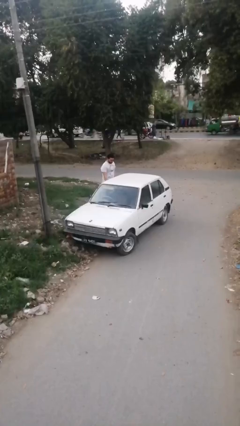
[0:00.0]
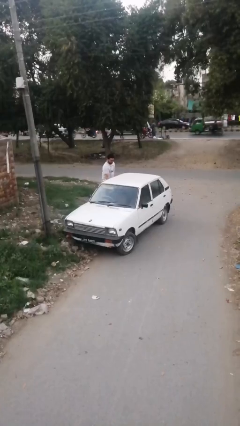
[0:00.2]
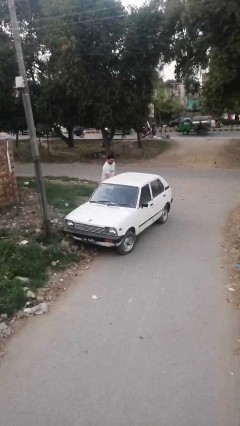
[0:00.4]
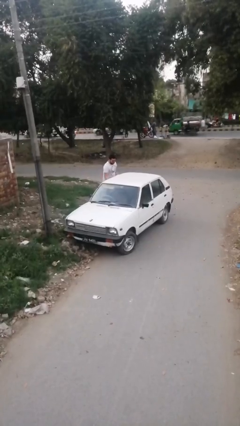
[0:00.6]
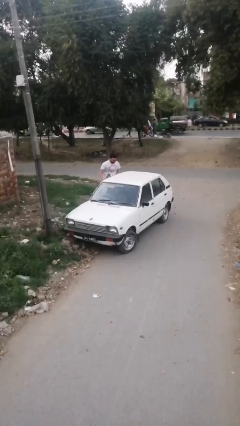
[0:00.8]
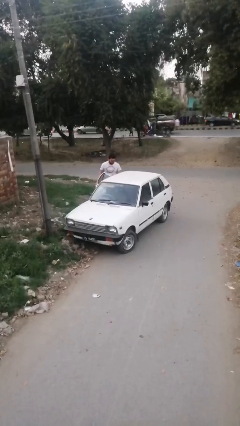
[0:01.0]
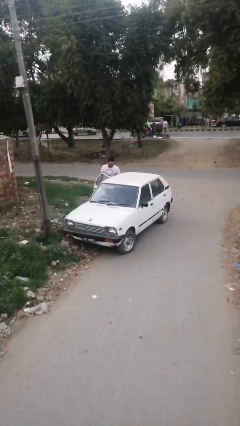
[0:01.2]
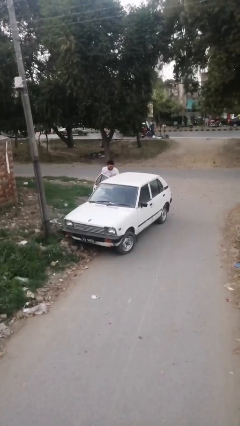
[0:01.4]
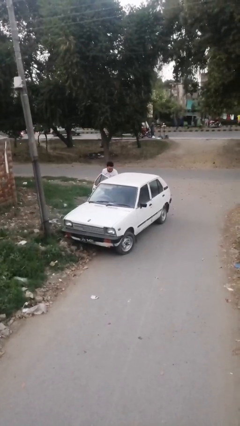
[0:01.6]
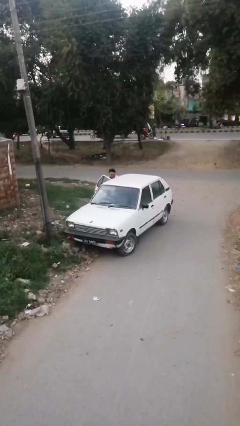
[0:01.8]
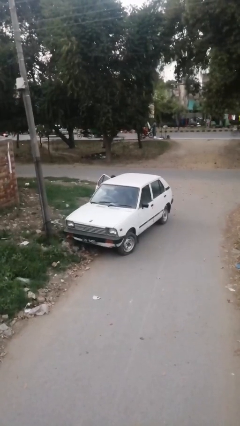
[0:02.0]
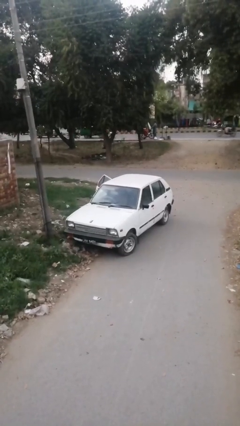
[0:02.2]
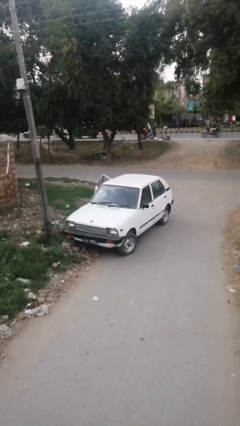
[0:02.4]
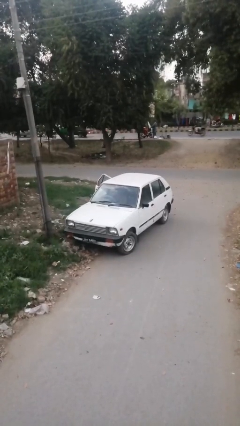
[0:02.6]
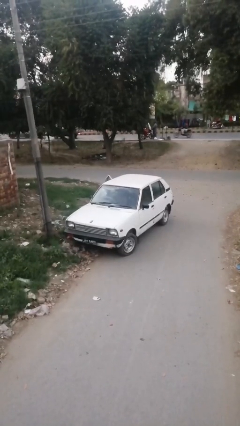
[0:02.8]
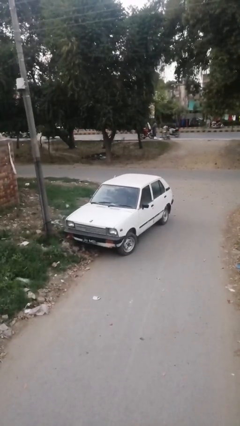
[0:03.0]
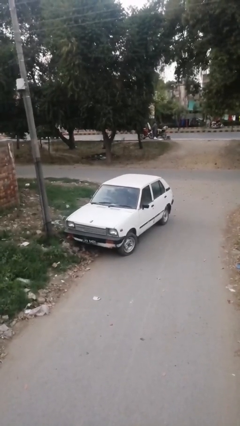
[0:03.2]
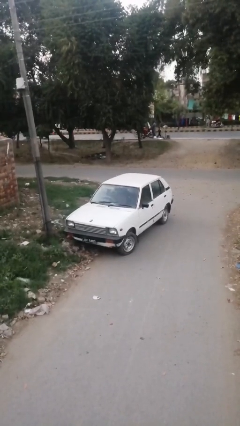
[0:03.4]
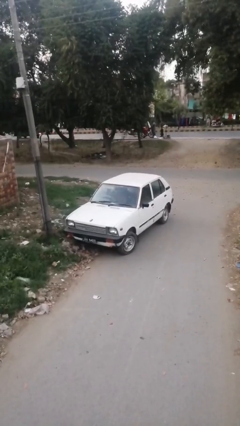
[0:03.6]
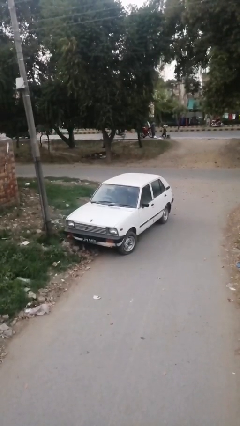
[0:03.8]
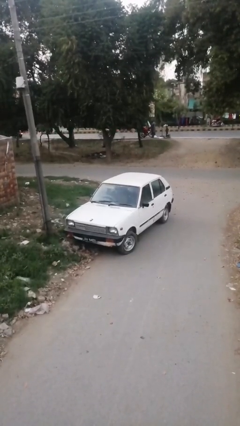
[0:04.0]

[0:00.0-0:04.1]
car picks up person

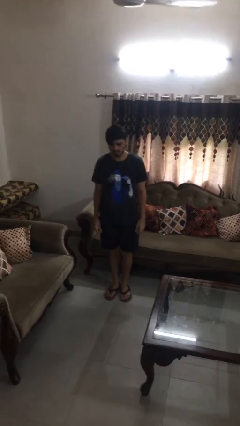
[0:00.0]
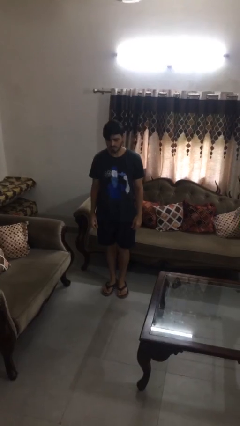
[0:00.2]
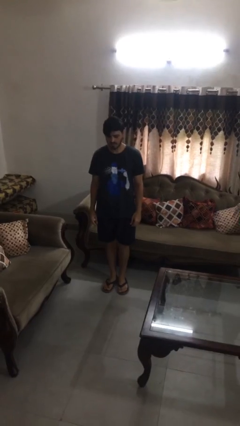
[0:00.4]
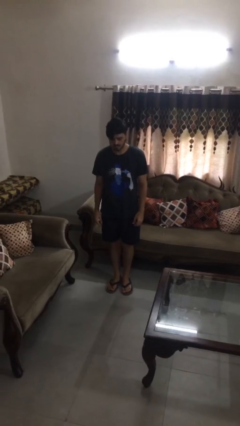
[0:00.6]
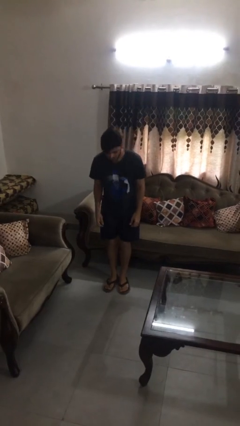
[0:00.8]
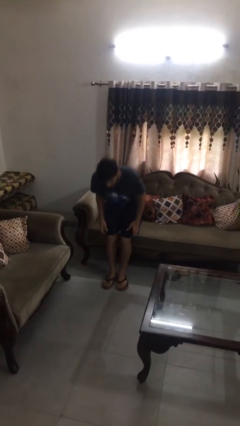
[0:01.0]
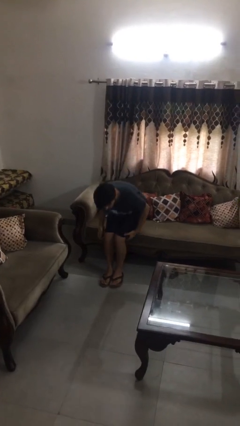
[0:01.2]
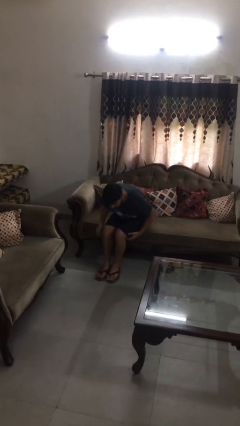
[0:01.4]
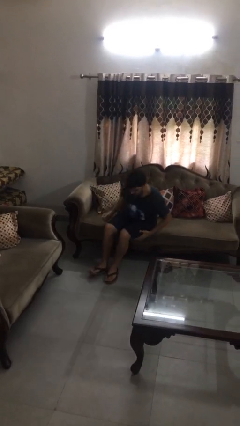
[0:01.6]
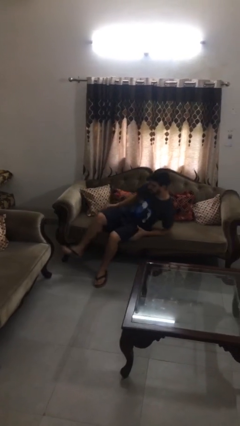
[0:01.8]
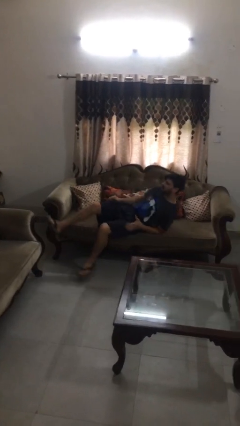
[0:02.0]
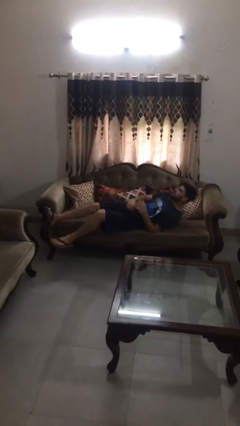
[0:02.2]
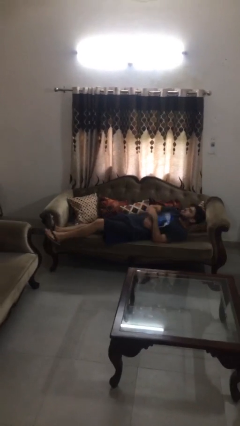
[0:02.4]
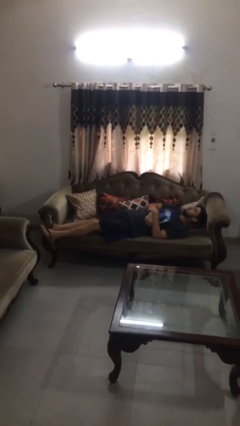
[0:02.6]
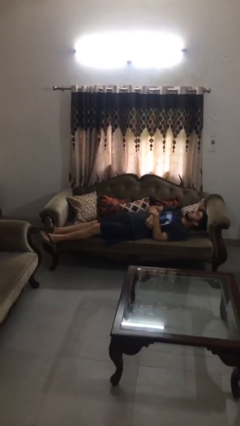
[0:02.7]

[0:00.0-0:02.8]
person lies down on couch

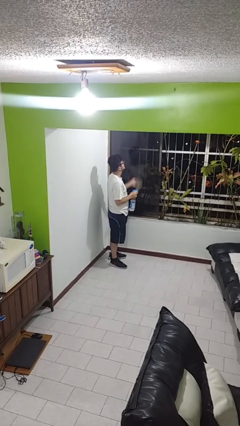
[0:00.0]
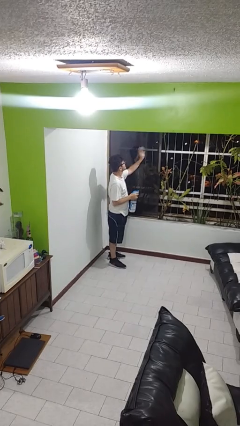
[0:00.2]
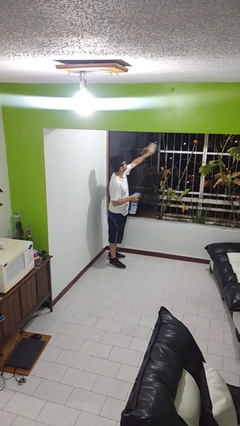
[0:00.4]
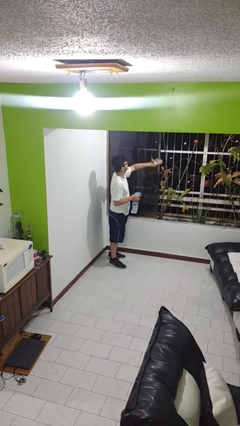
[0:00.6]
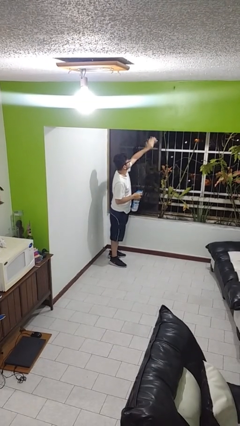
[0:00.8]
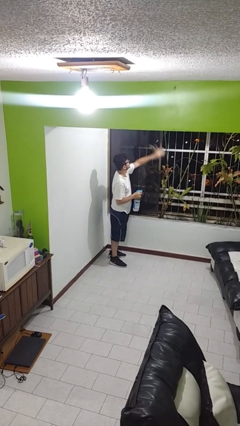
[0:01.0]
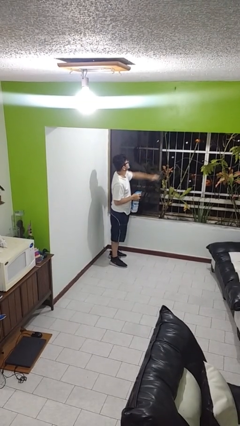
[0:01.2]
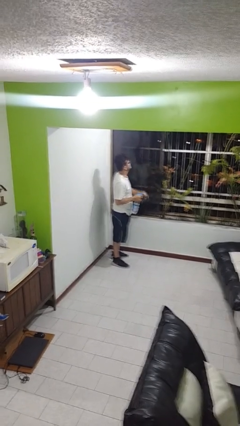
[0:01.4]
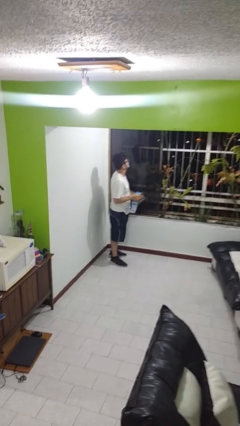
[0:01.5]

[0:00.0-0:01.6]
person washes window

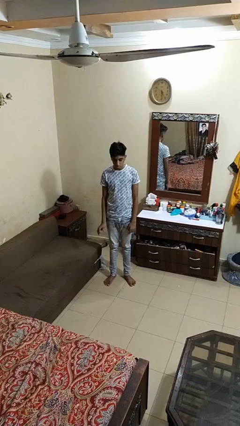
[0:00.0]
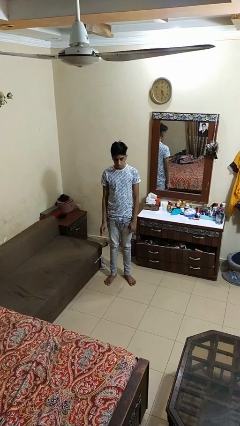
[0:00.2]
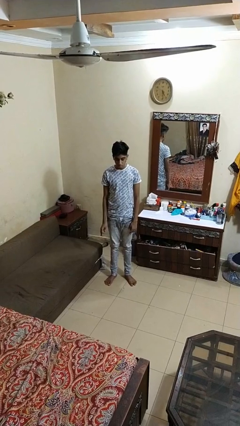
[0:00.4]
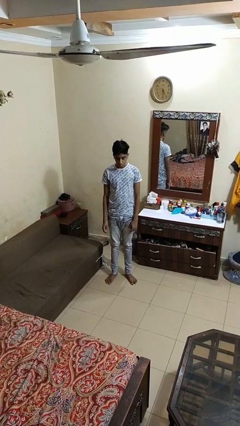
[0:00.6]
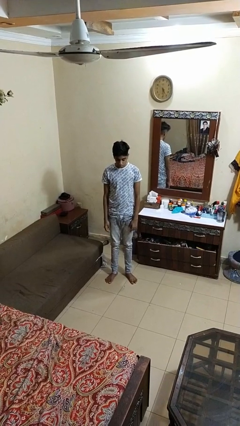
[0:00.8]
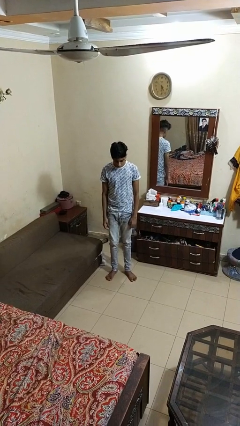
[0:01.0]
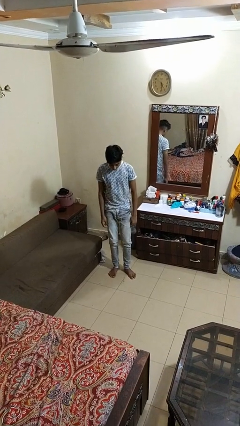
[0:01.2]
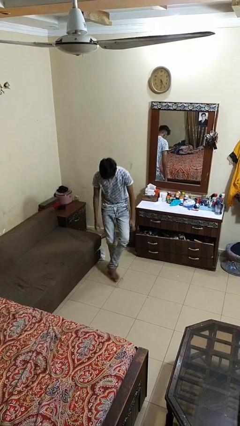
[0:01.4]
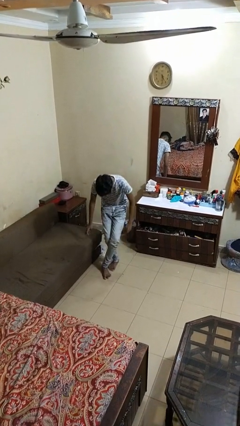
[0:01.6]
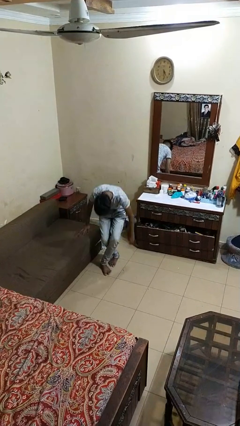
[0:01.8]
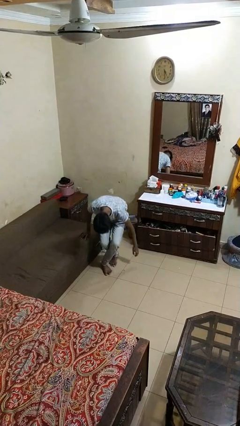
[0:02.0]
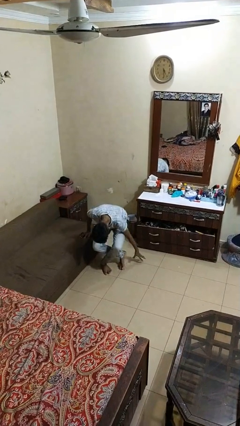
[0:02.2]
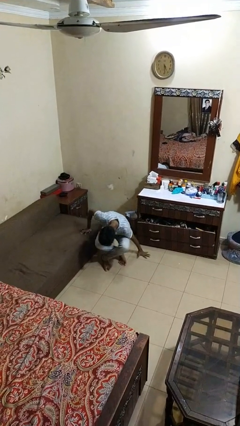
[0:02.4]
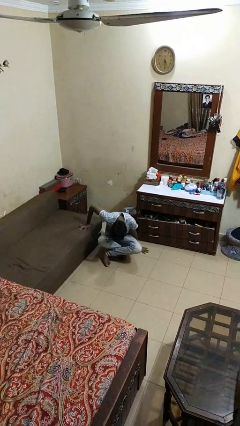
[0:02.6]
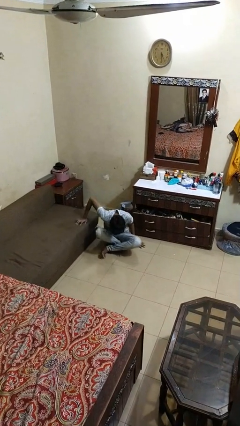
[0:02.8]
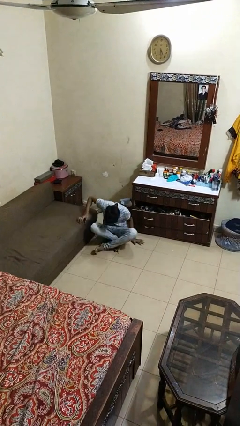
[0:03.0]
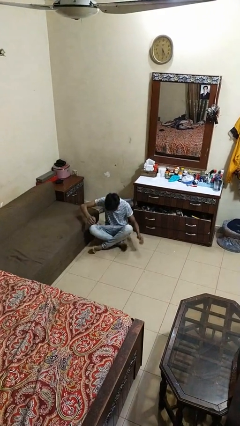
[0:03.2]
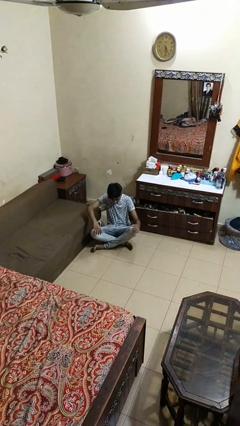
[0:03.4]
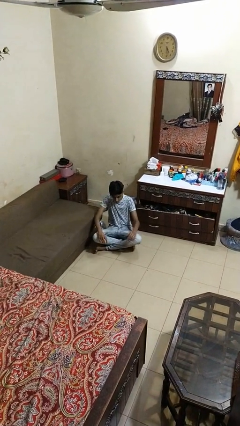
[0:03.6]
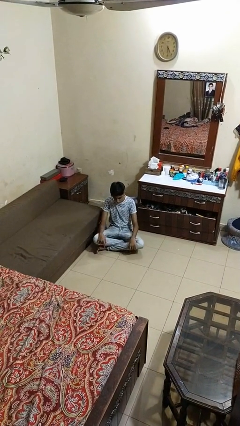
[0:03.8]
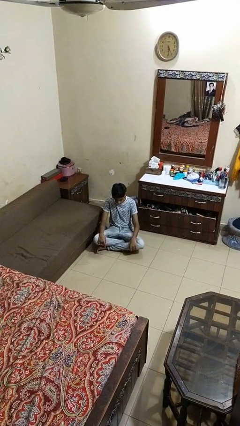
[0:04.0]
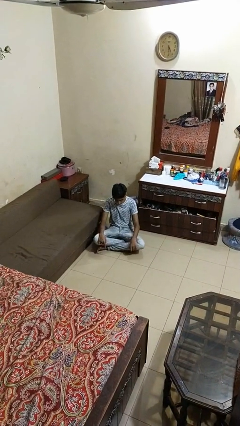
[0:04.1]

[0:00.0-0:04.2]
person sits crisscross

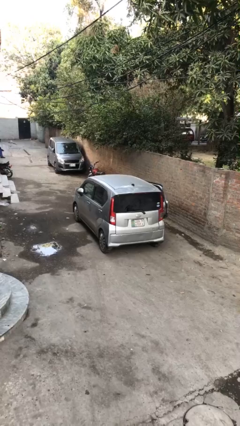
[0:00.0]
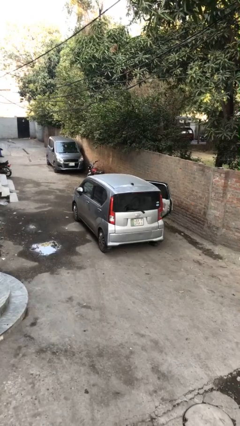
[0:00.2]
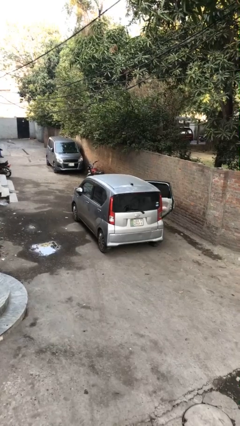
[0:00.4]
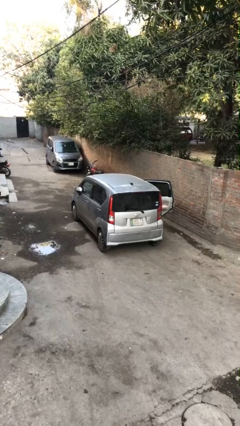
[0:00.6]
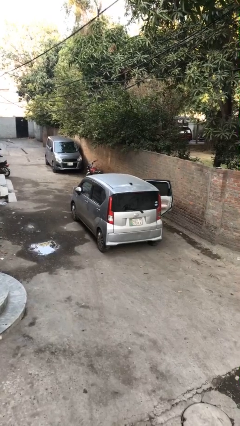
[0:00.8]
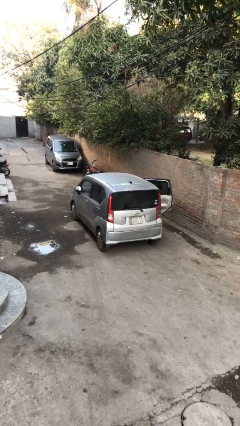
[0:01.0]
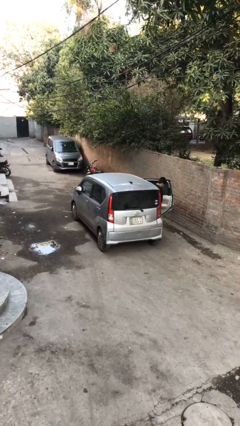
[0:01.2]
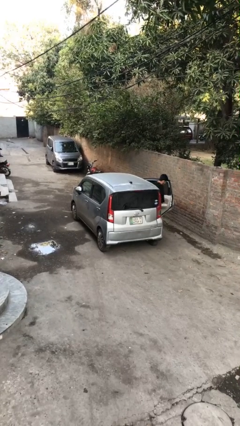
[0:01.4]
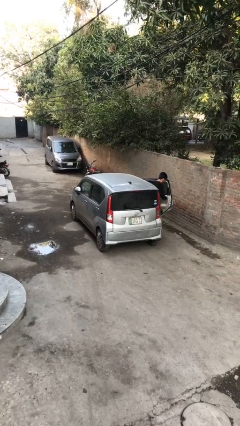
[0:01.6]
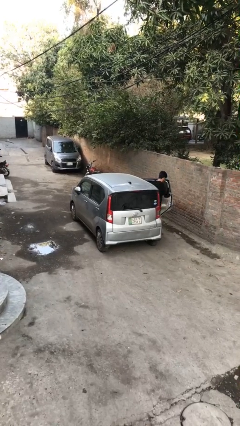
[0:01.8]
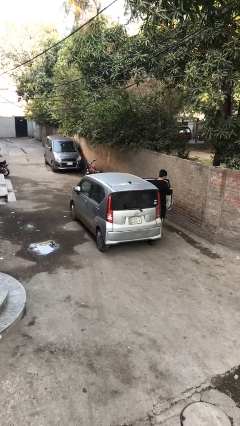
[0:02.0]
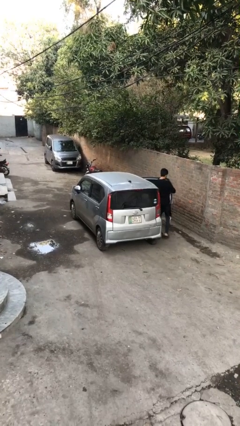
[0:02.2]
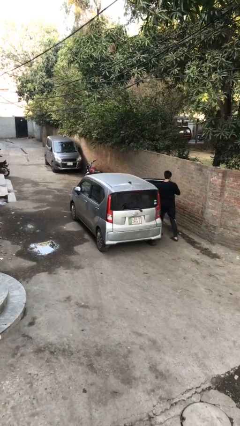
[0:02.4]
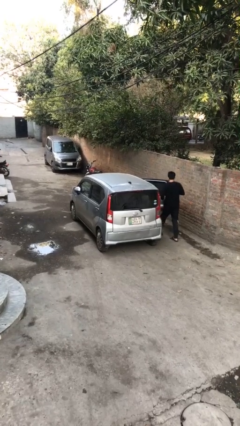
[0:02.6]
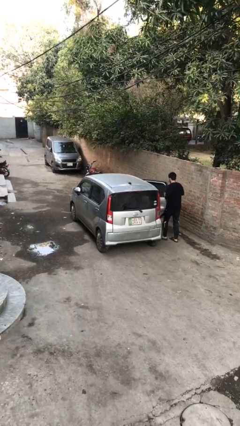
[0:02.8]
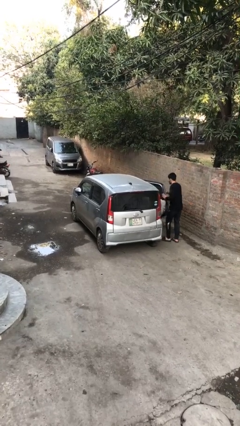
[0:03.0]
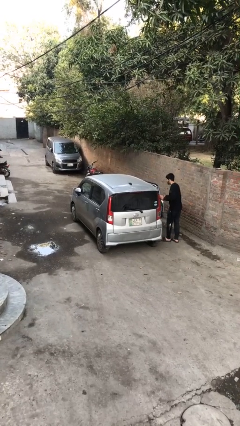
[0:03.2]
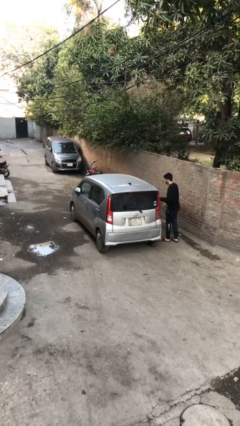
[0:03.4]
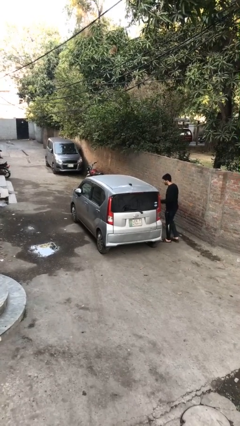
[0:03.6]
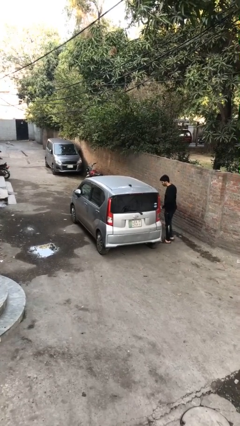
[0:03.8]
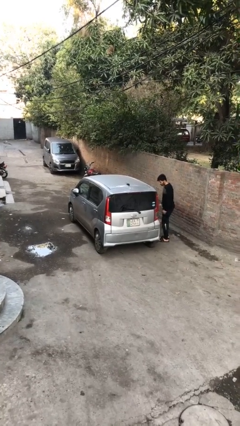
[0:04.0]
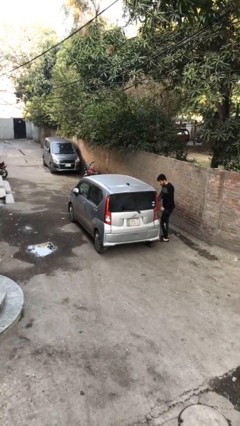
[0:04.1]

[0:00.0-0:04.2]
car drops off person

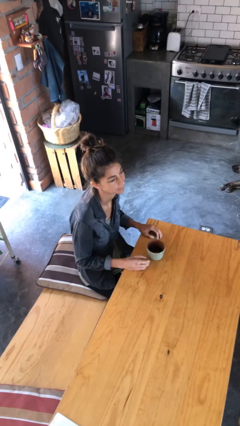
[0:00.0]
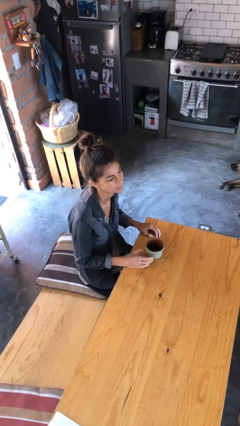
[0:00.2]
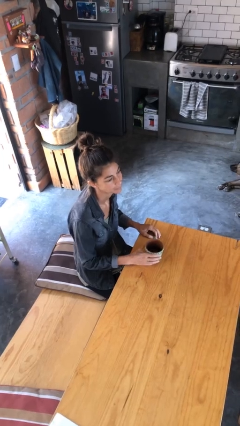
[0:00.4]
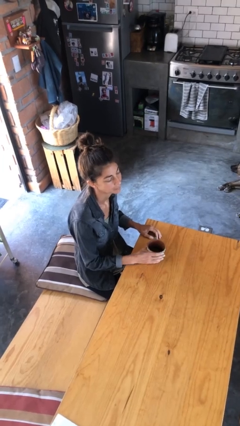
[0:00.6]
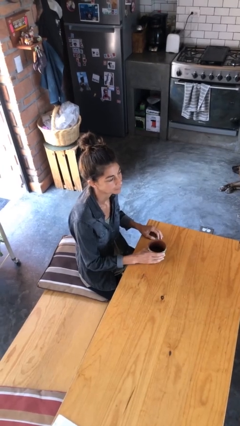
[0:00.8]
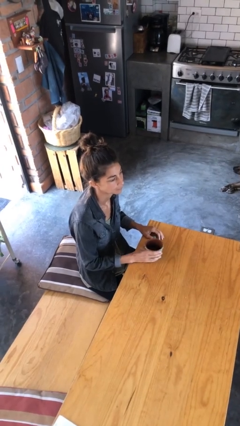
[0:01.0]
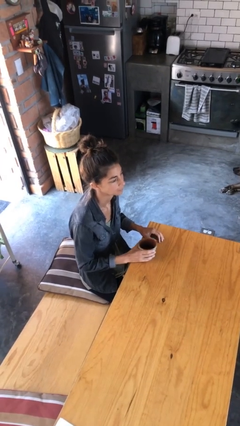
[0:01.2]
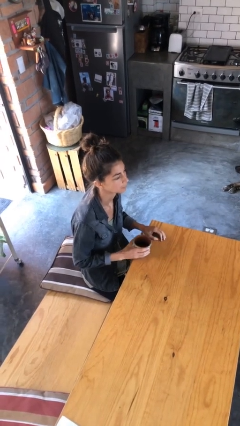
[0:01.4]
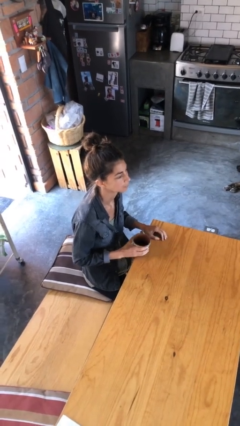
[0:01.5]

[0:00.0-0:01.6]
person picks up object from table
